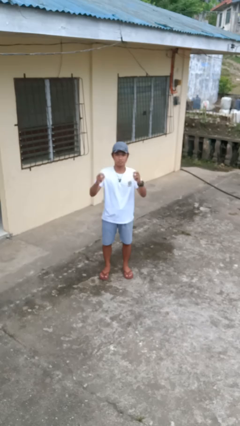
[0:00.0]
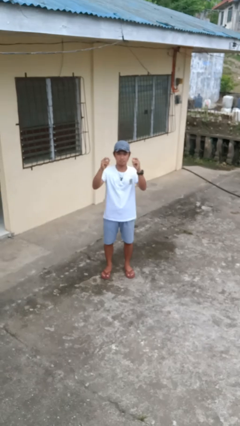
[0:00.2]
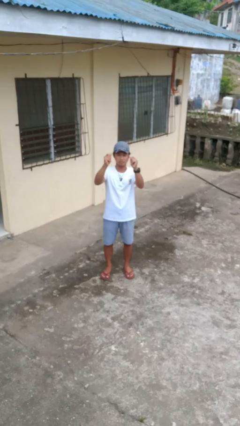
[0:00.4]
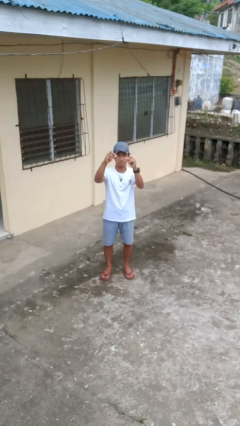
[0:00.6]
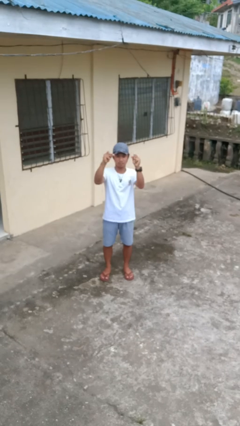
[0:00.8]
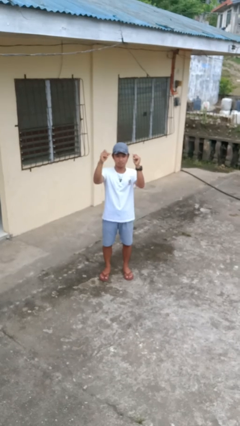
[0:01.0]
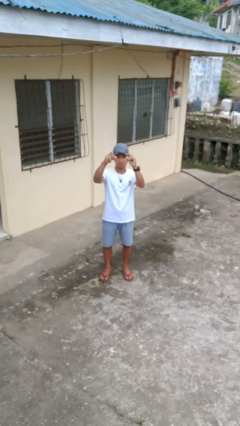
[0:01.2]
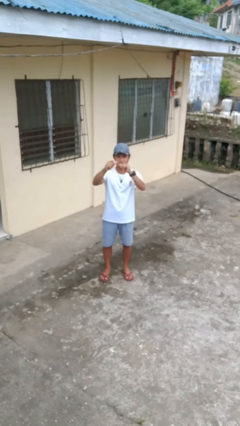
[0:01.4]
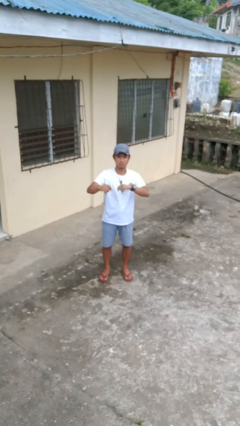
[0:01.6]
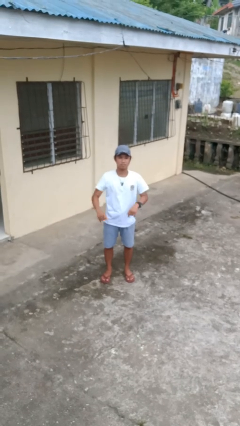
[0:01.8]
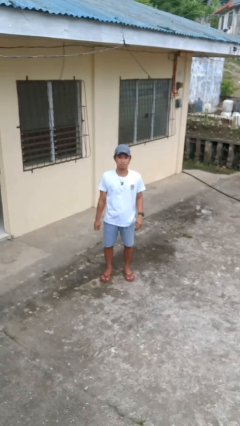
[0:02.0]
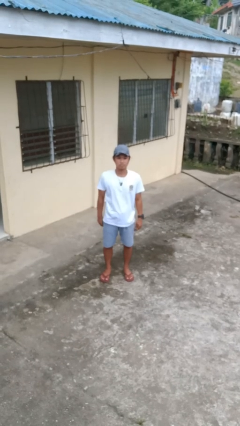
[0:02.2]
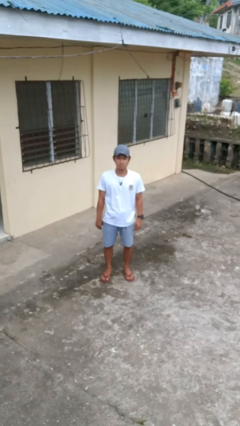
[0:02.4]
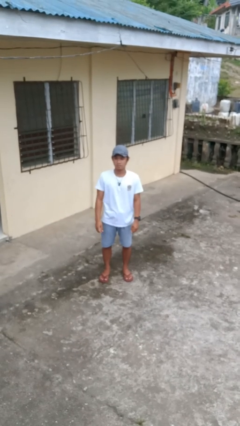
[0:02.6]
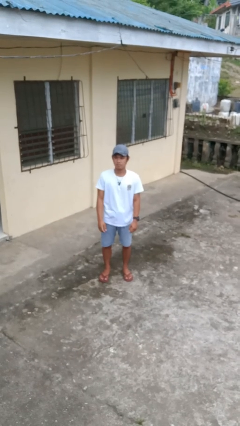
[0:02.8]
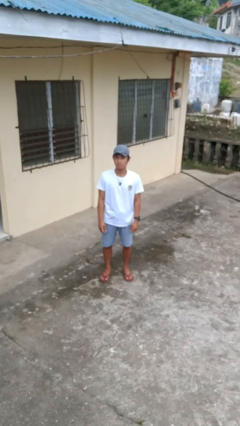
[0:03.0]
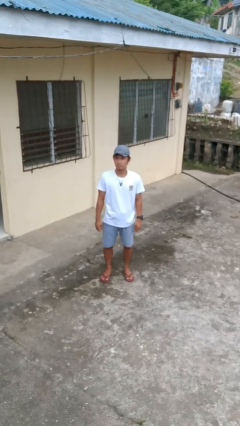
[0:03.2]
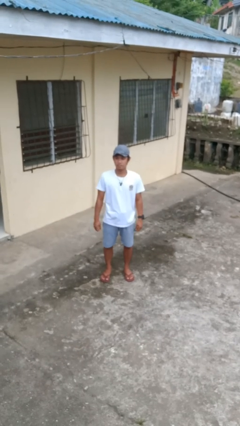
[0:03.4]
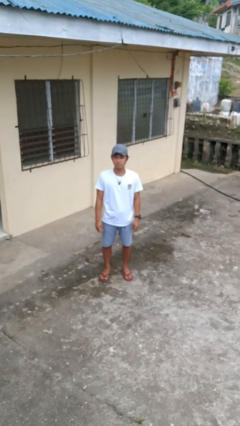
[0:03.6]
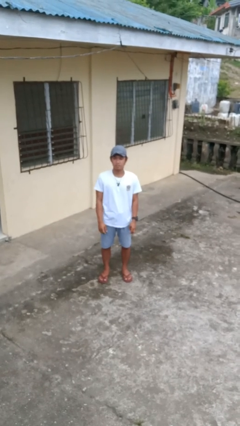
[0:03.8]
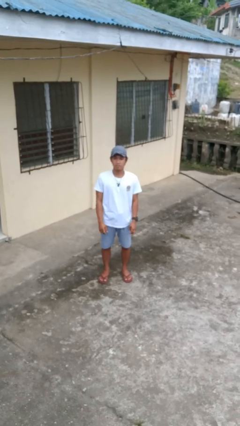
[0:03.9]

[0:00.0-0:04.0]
person snaps fingers

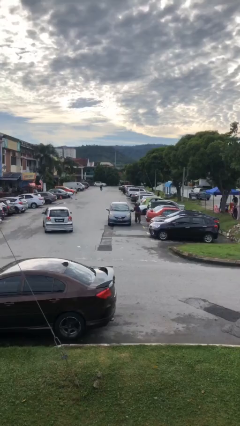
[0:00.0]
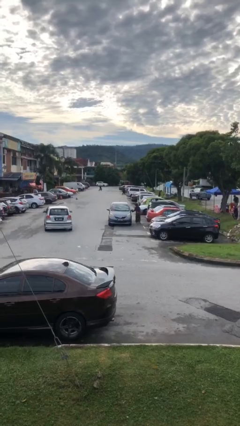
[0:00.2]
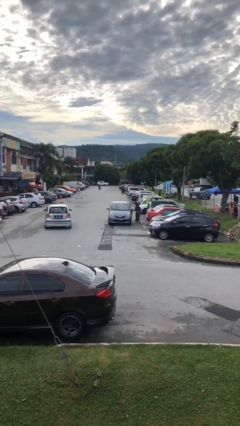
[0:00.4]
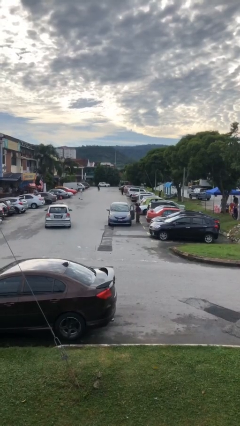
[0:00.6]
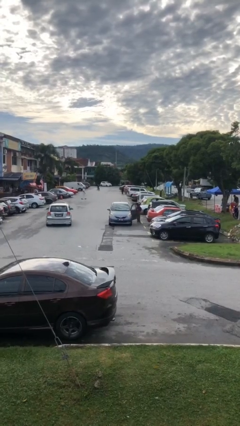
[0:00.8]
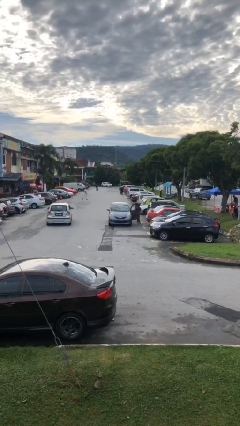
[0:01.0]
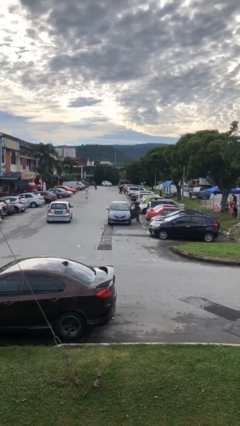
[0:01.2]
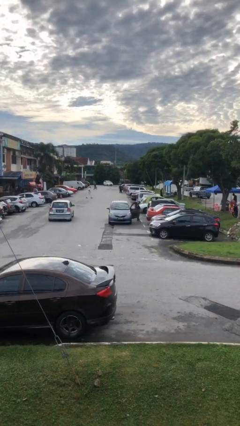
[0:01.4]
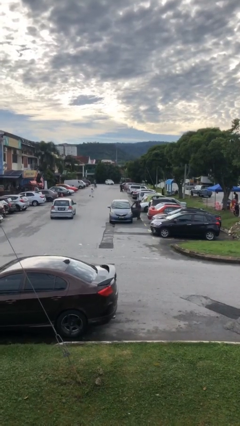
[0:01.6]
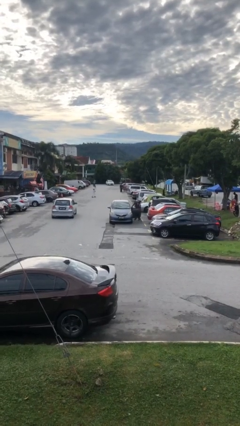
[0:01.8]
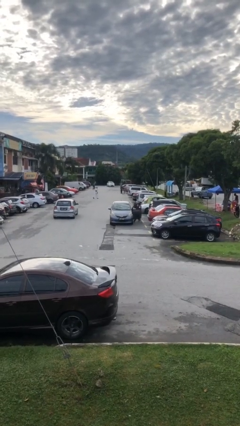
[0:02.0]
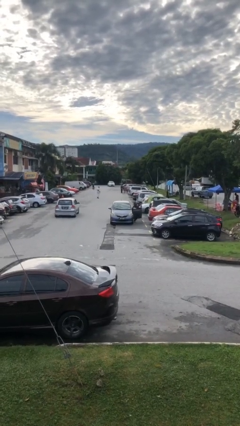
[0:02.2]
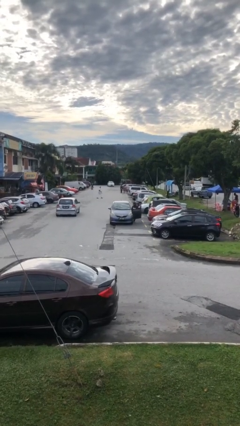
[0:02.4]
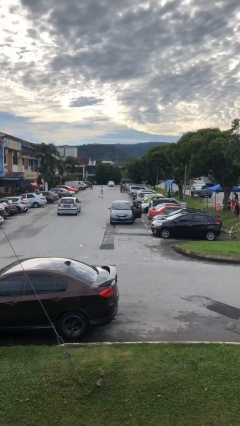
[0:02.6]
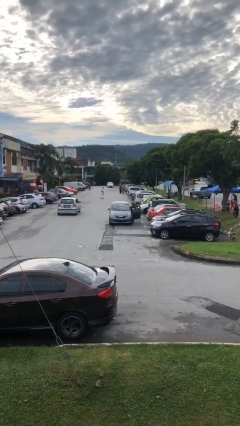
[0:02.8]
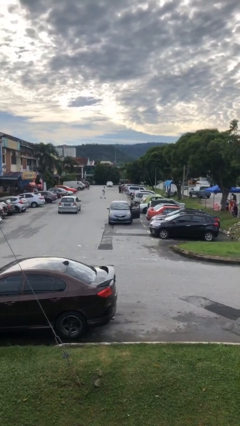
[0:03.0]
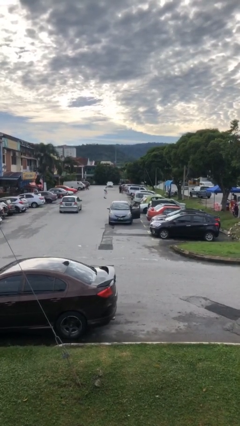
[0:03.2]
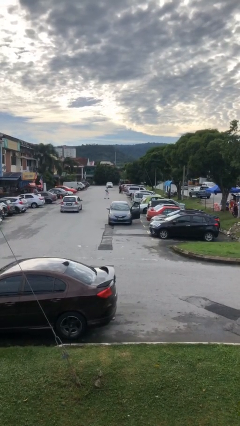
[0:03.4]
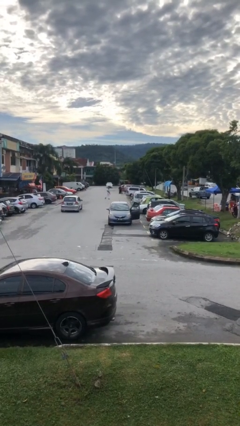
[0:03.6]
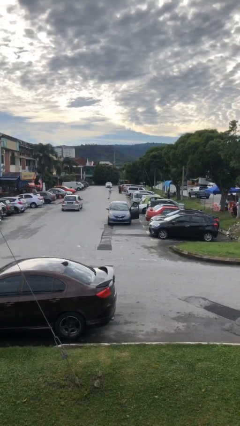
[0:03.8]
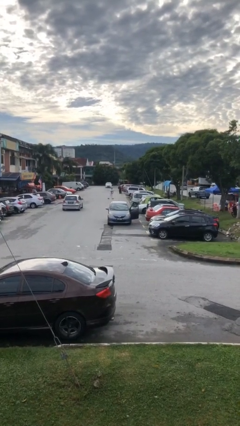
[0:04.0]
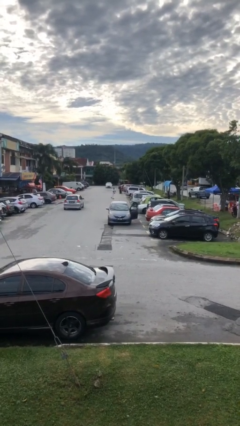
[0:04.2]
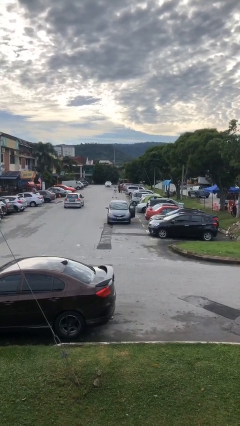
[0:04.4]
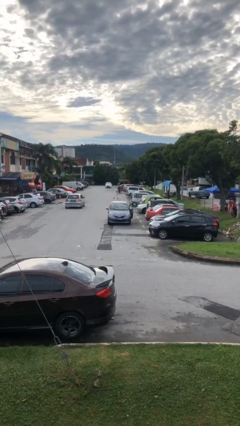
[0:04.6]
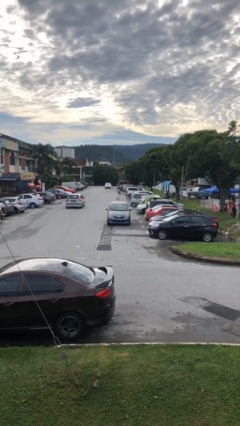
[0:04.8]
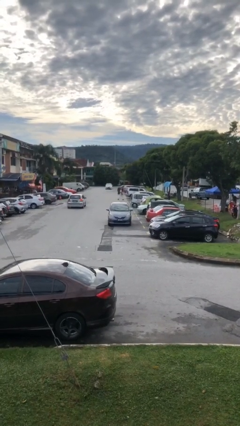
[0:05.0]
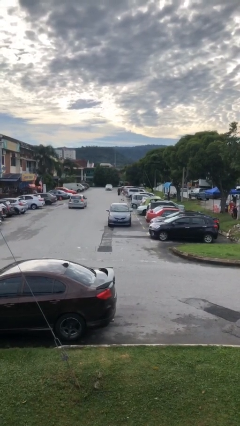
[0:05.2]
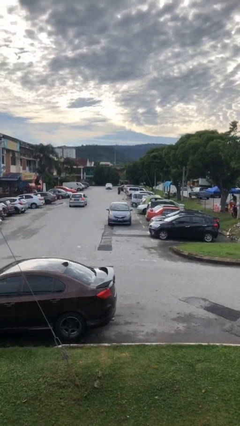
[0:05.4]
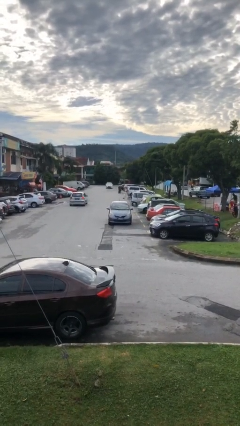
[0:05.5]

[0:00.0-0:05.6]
car picks up person

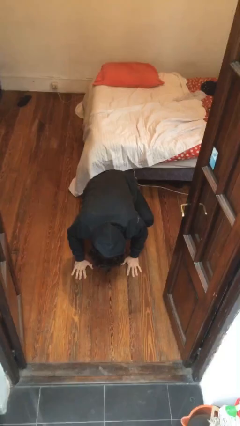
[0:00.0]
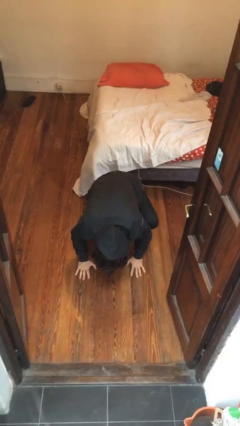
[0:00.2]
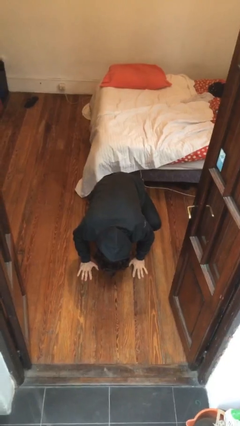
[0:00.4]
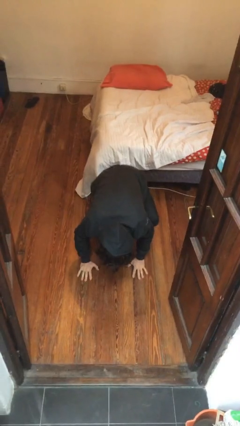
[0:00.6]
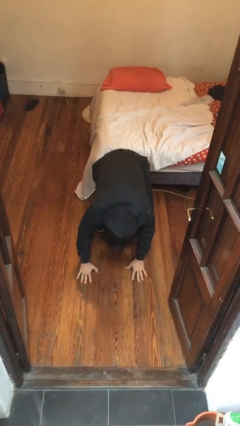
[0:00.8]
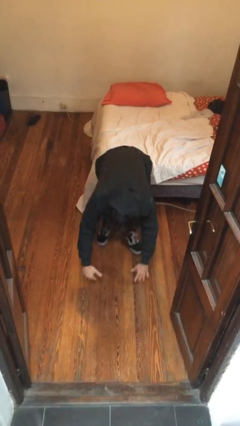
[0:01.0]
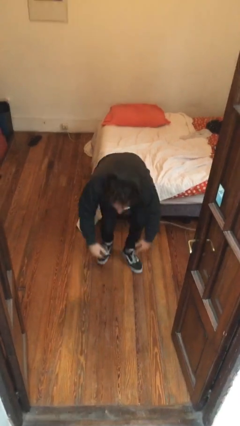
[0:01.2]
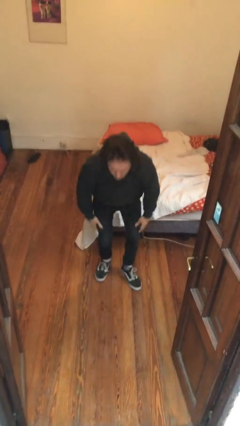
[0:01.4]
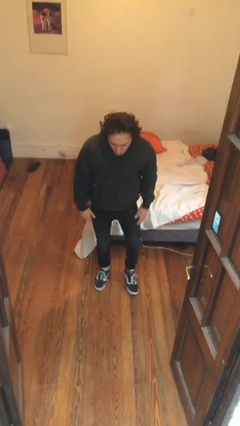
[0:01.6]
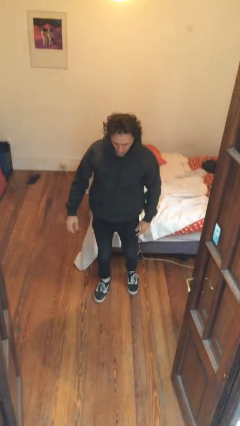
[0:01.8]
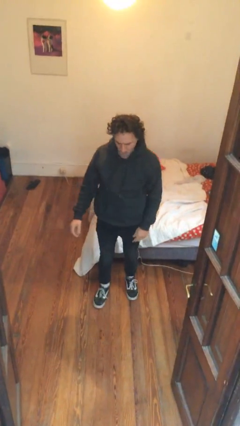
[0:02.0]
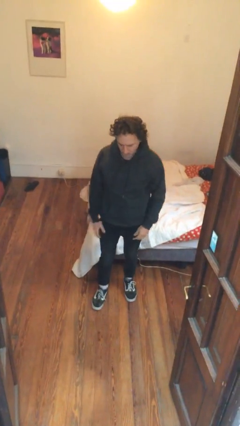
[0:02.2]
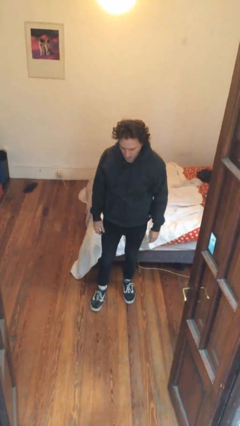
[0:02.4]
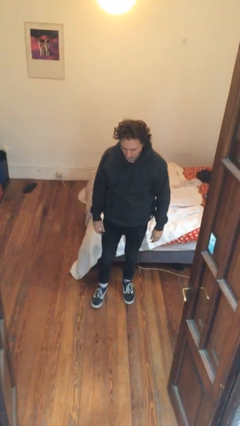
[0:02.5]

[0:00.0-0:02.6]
person stands up from floor

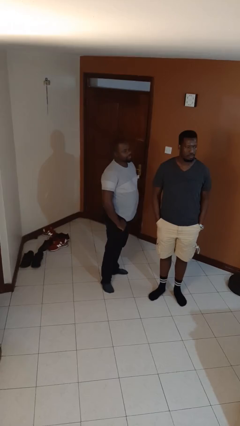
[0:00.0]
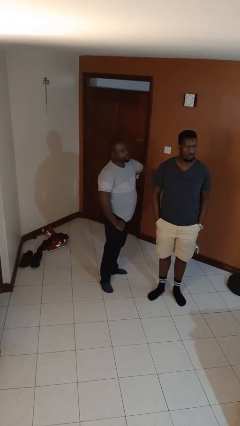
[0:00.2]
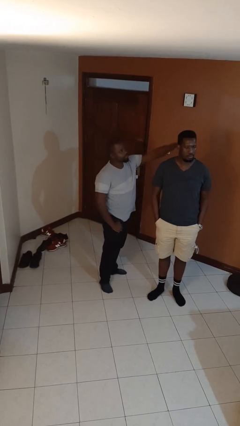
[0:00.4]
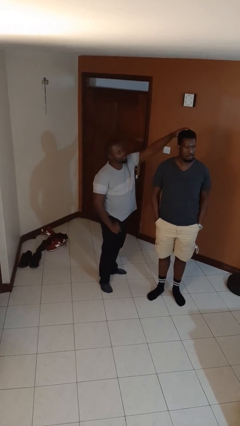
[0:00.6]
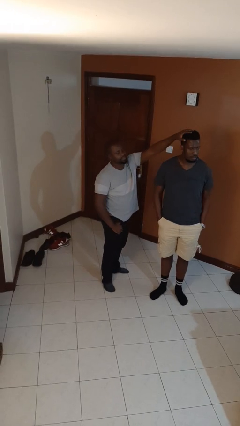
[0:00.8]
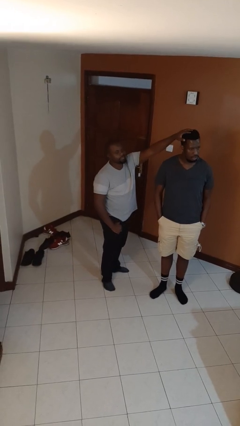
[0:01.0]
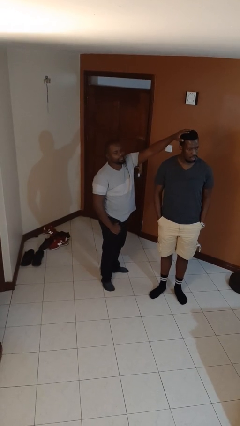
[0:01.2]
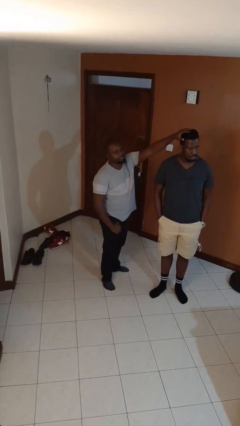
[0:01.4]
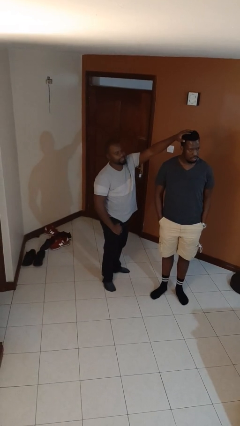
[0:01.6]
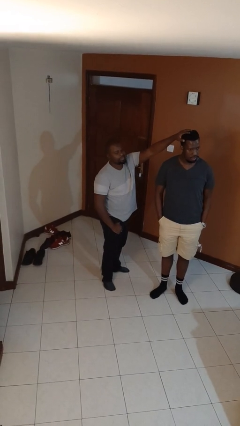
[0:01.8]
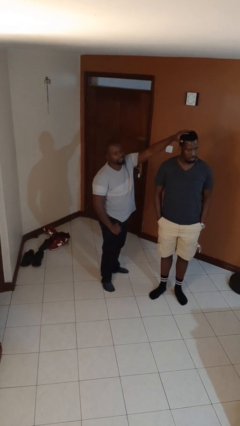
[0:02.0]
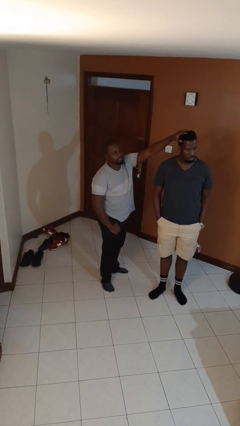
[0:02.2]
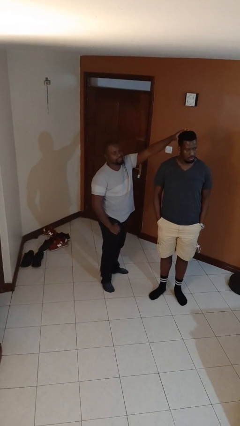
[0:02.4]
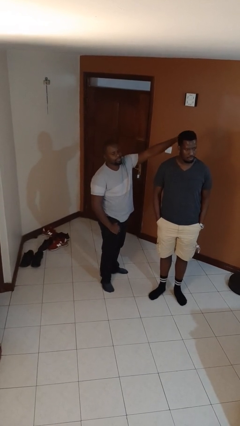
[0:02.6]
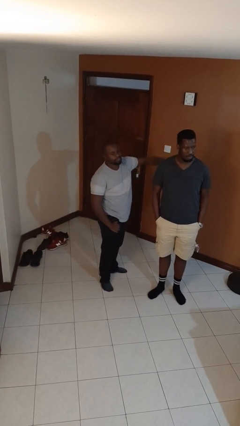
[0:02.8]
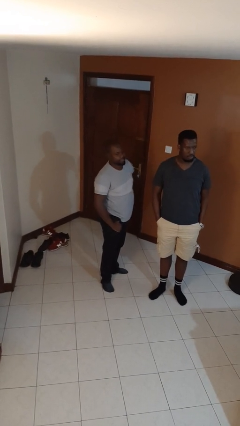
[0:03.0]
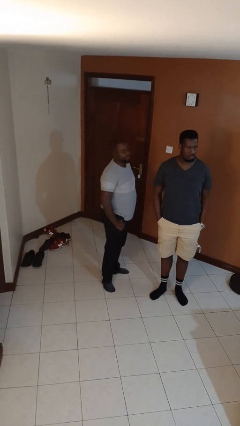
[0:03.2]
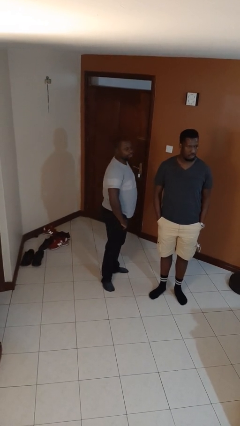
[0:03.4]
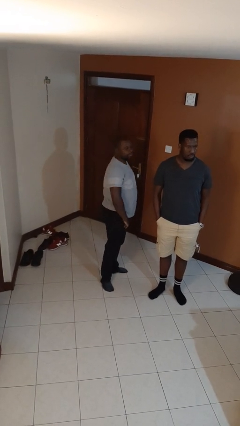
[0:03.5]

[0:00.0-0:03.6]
person grabs person by hair

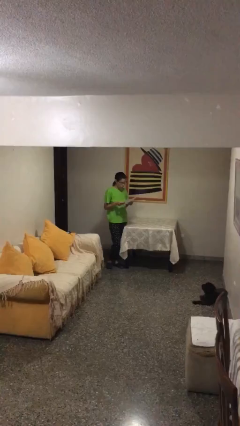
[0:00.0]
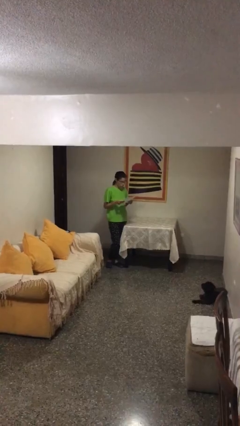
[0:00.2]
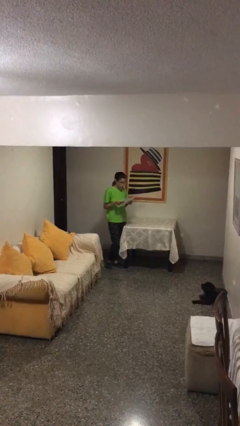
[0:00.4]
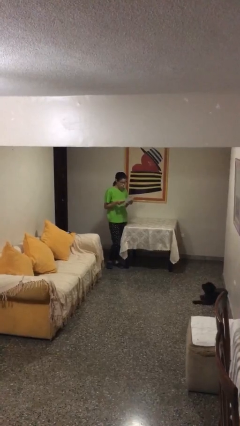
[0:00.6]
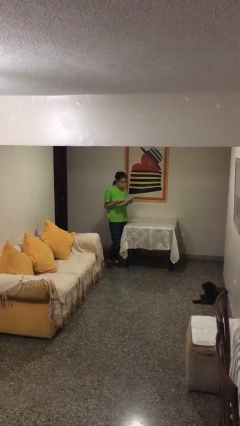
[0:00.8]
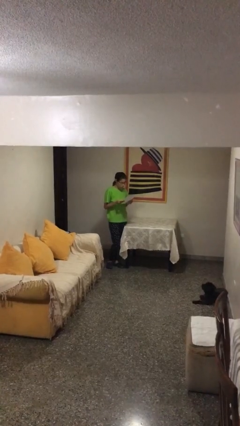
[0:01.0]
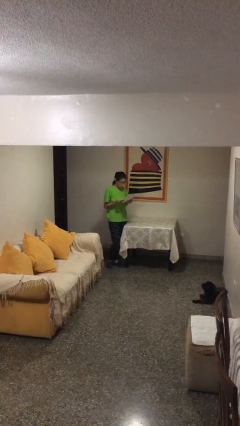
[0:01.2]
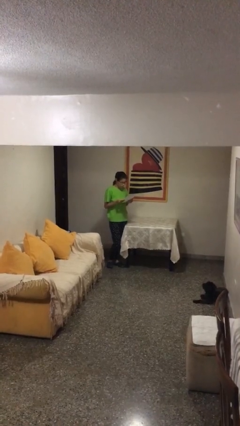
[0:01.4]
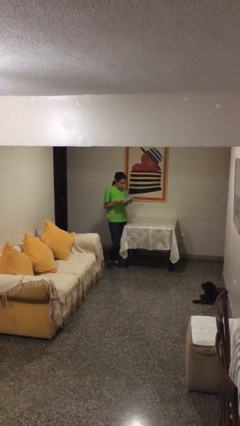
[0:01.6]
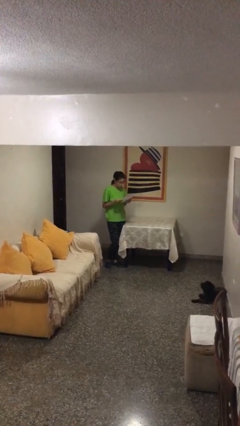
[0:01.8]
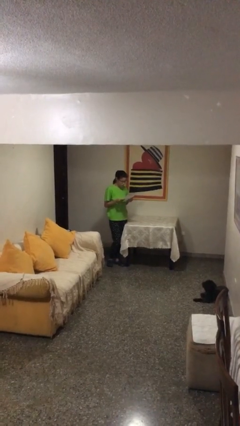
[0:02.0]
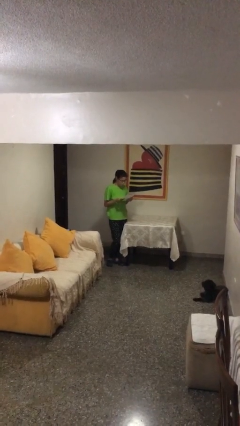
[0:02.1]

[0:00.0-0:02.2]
person reads document
